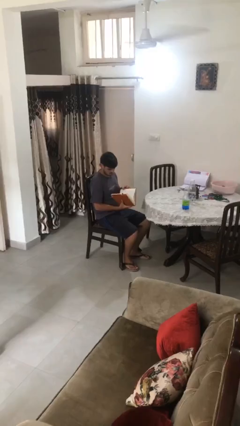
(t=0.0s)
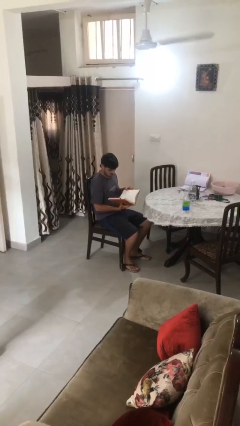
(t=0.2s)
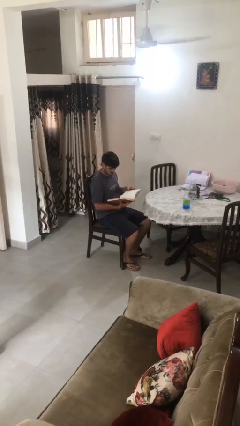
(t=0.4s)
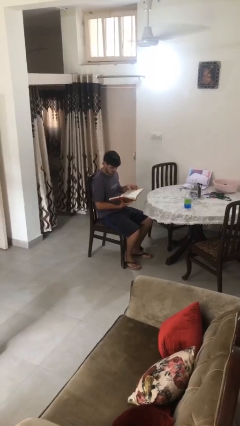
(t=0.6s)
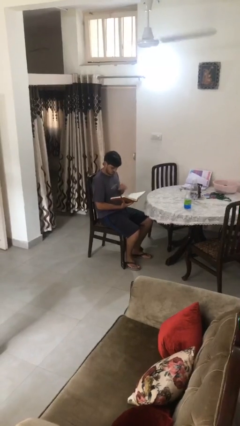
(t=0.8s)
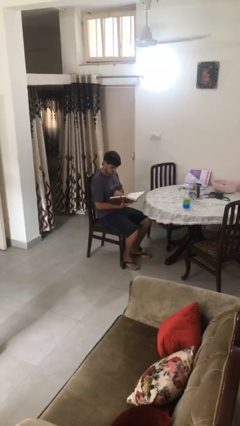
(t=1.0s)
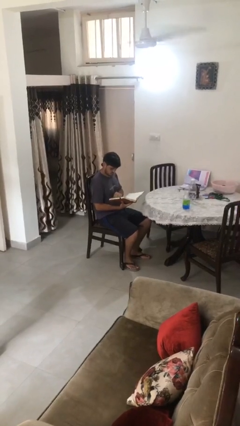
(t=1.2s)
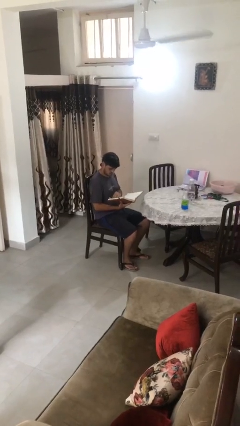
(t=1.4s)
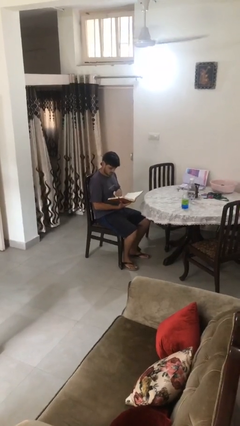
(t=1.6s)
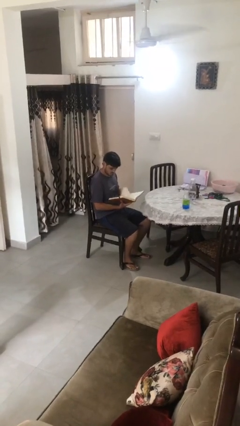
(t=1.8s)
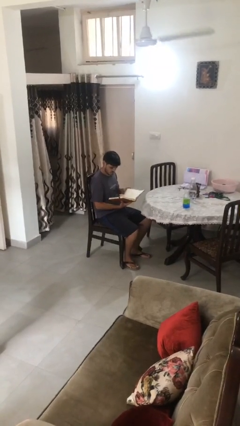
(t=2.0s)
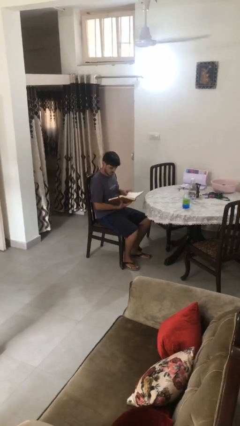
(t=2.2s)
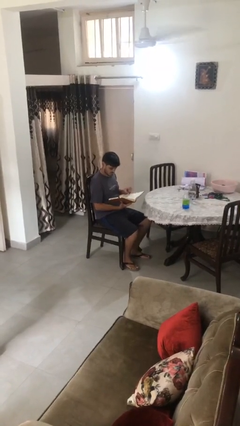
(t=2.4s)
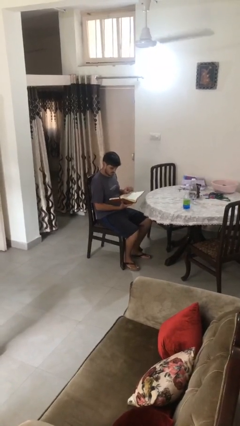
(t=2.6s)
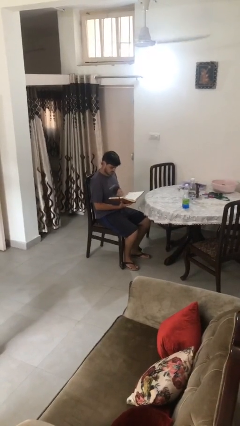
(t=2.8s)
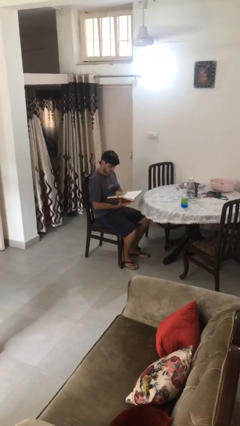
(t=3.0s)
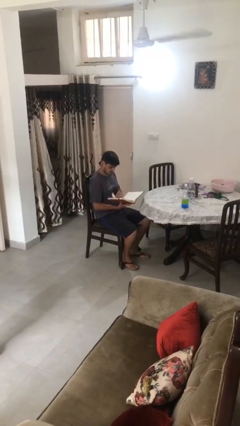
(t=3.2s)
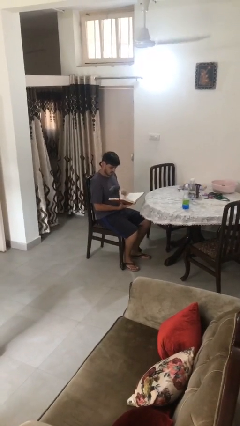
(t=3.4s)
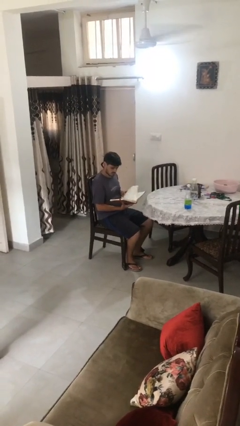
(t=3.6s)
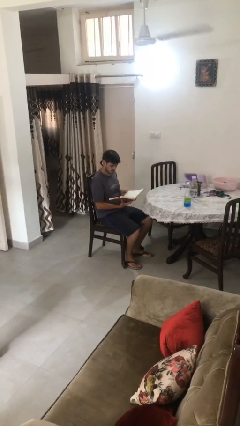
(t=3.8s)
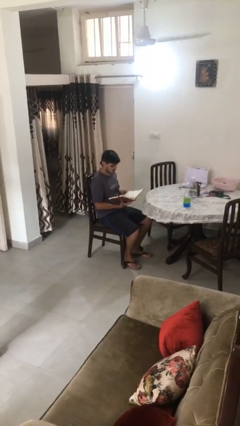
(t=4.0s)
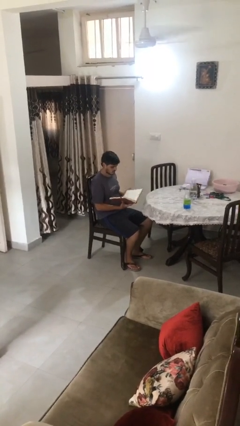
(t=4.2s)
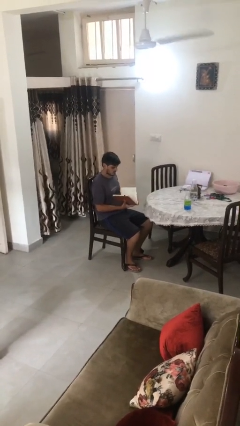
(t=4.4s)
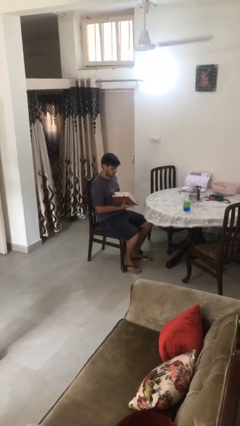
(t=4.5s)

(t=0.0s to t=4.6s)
person reads document

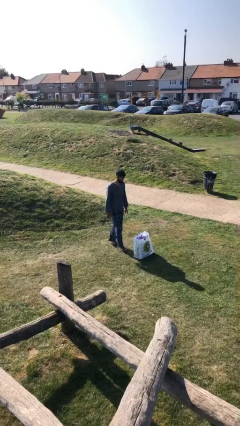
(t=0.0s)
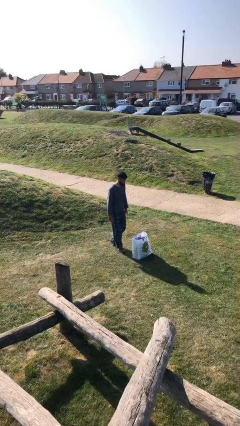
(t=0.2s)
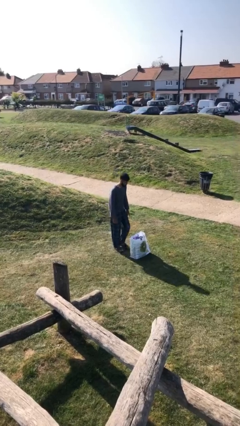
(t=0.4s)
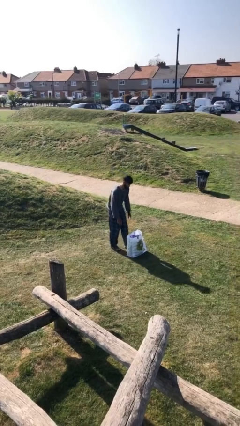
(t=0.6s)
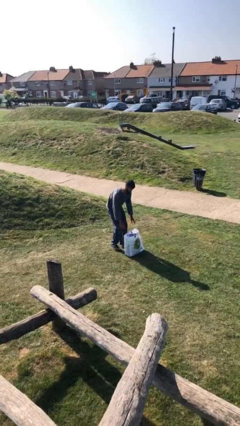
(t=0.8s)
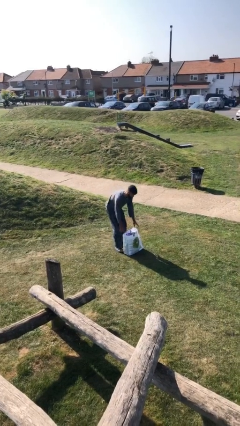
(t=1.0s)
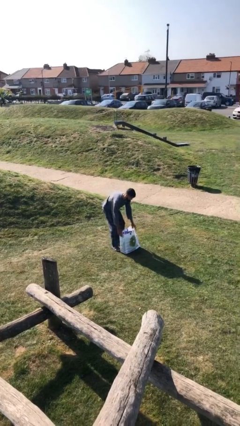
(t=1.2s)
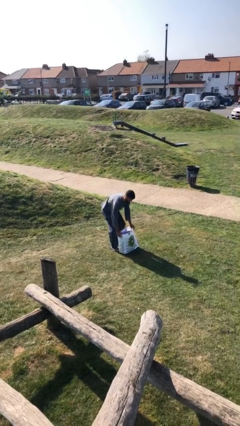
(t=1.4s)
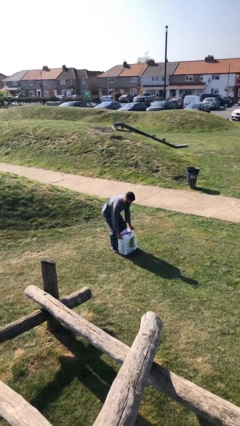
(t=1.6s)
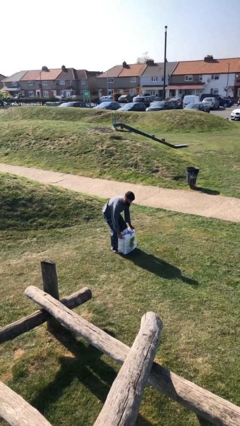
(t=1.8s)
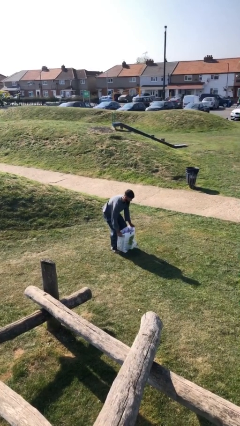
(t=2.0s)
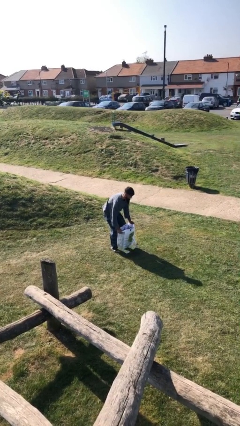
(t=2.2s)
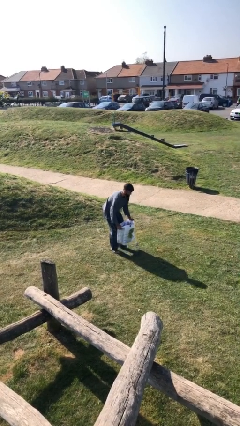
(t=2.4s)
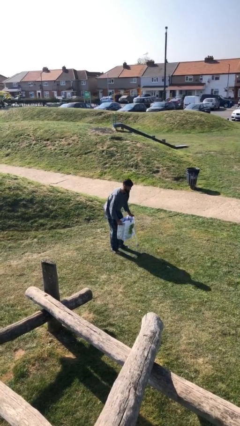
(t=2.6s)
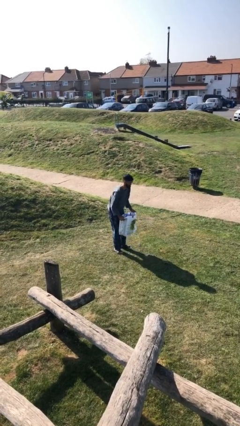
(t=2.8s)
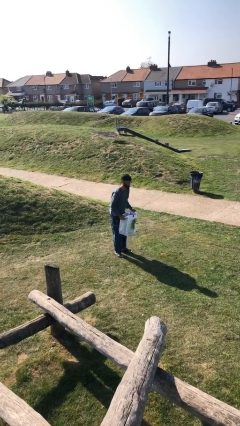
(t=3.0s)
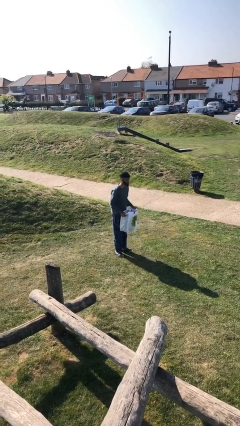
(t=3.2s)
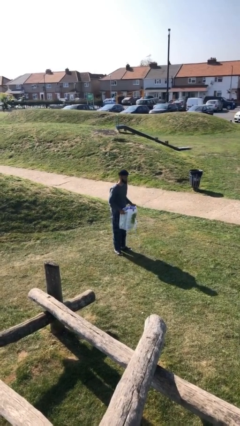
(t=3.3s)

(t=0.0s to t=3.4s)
person picks up object from floor

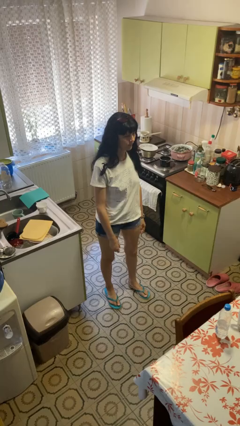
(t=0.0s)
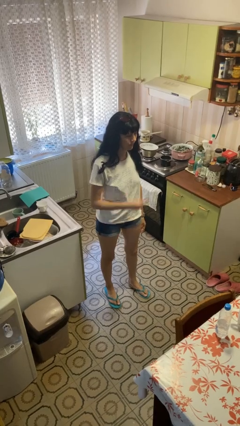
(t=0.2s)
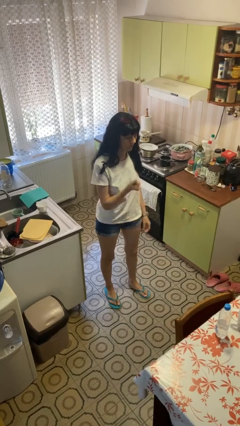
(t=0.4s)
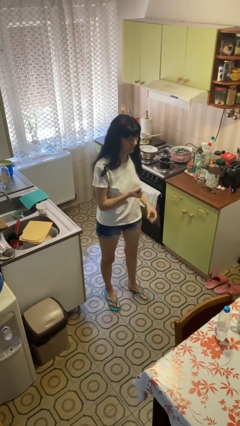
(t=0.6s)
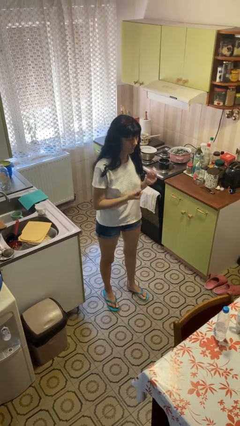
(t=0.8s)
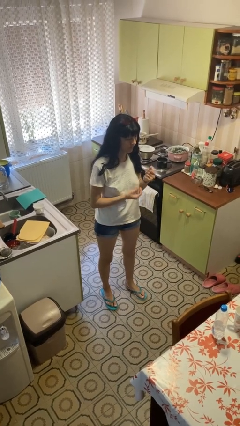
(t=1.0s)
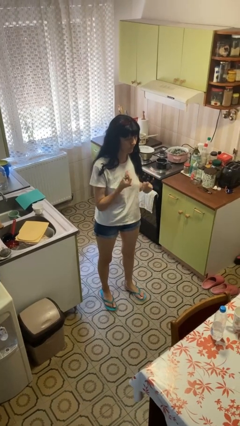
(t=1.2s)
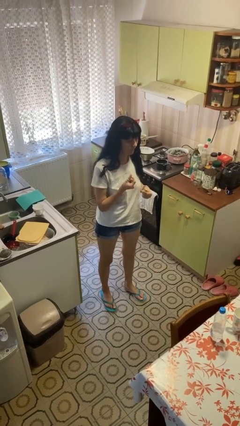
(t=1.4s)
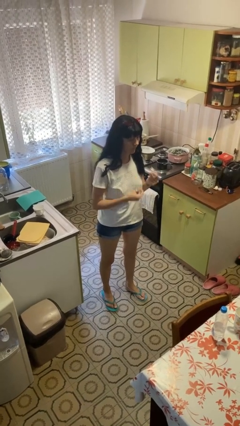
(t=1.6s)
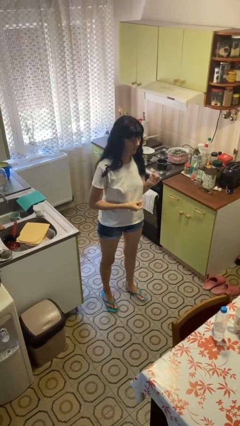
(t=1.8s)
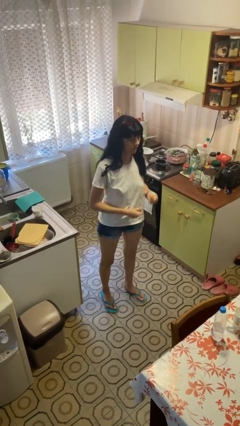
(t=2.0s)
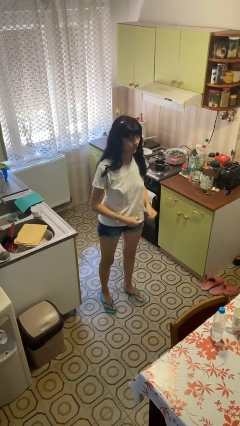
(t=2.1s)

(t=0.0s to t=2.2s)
person snaps fingers

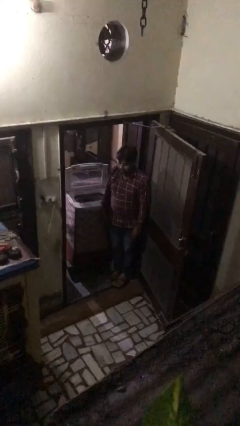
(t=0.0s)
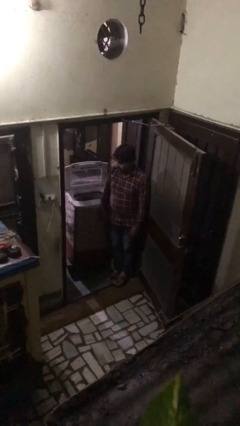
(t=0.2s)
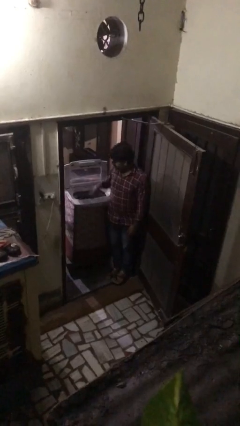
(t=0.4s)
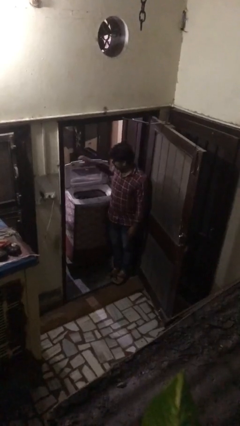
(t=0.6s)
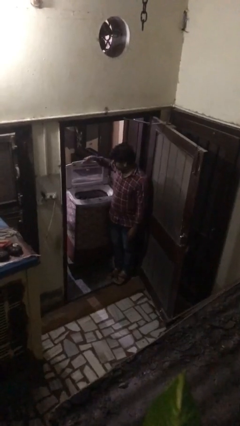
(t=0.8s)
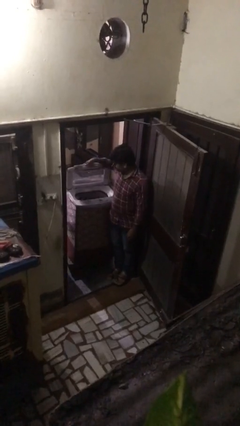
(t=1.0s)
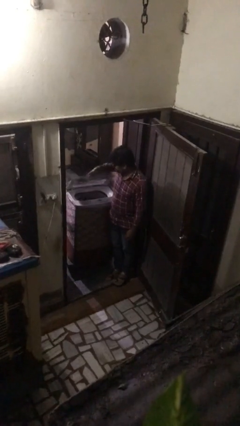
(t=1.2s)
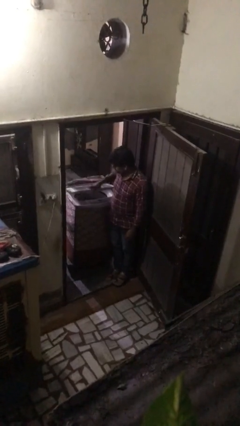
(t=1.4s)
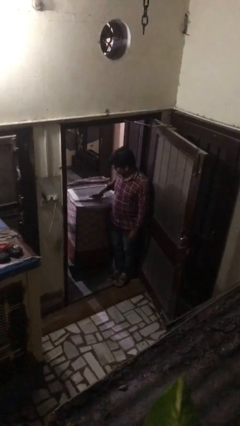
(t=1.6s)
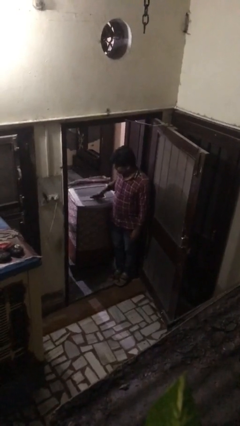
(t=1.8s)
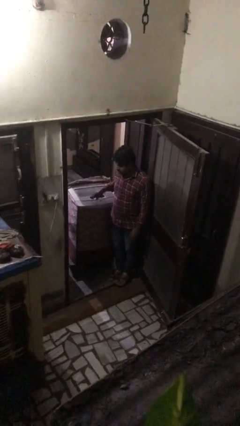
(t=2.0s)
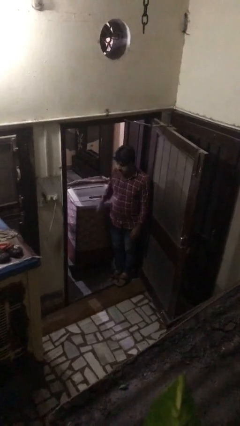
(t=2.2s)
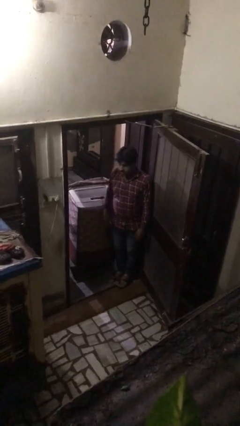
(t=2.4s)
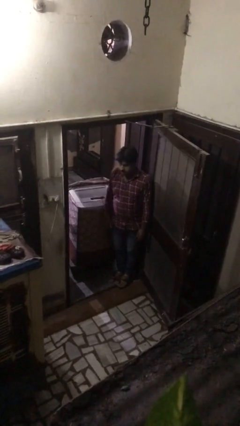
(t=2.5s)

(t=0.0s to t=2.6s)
person closes clothes washer

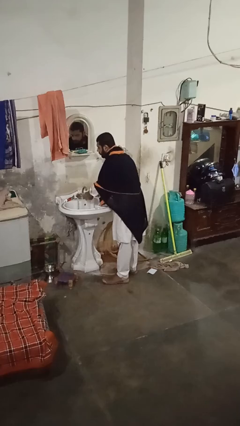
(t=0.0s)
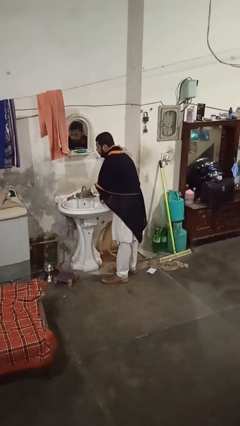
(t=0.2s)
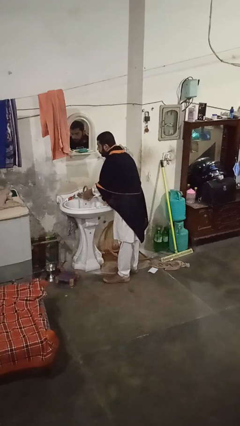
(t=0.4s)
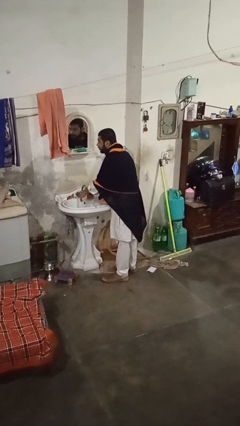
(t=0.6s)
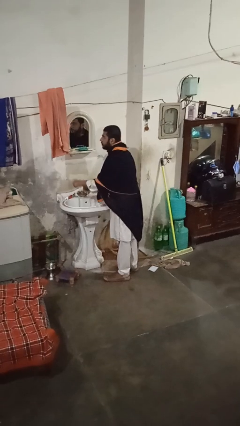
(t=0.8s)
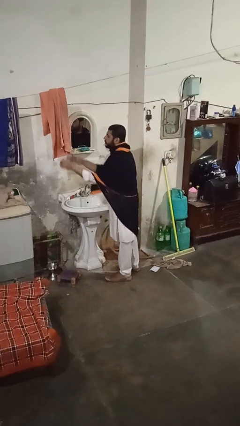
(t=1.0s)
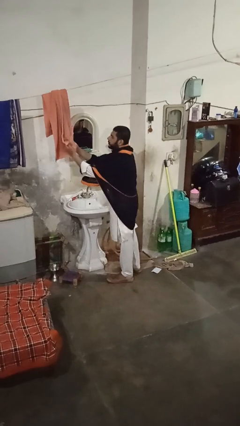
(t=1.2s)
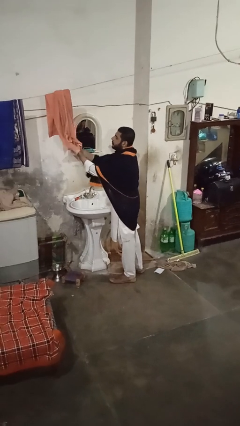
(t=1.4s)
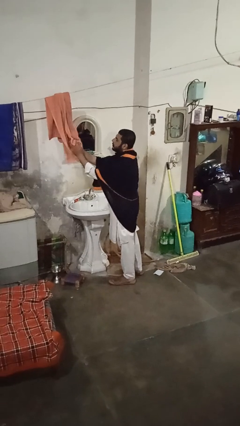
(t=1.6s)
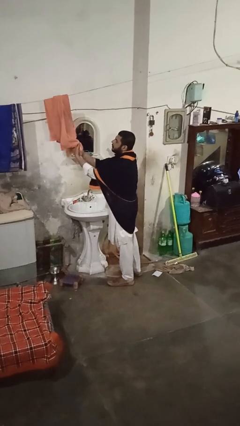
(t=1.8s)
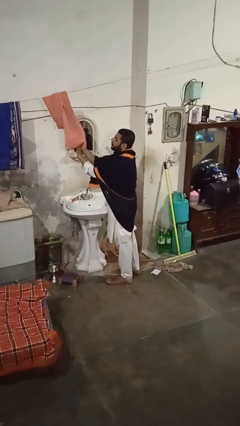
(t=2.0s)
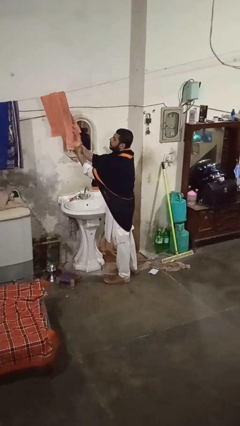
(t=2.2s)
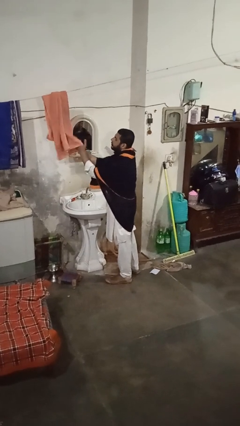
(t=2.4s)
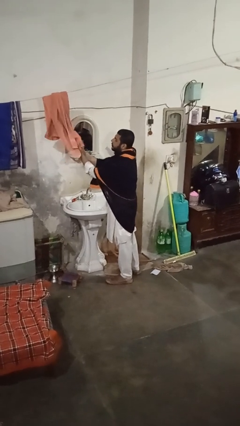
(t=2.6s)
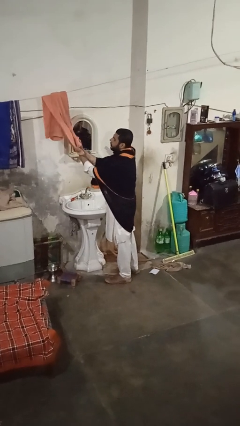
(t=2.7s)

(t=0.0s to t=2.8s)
person dries hands with towel

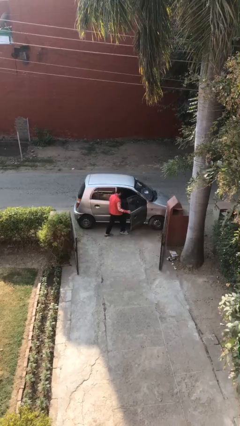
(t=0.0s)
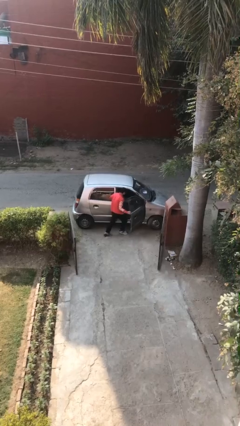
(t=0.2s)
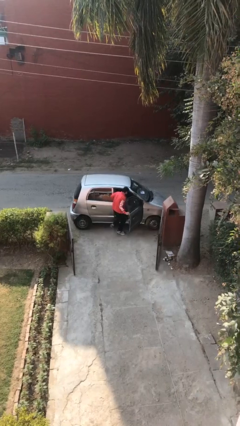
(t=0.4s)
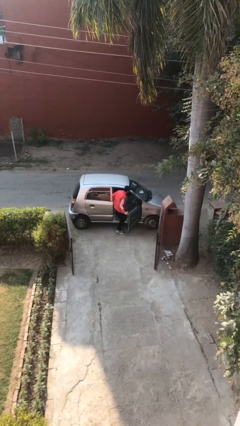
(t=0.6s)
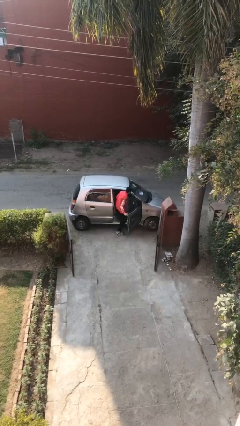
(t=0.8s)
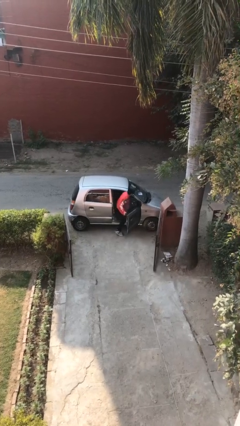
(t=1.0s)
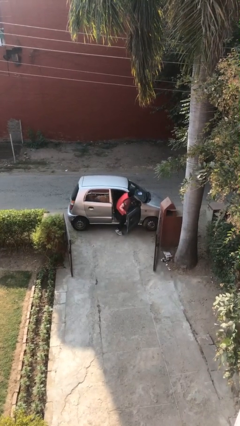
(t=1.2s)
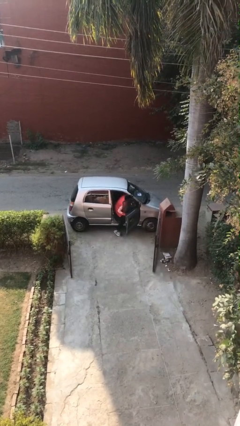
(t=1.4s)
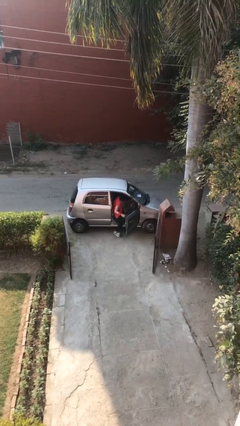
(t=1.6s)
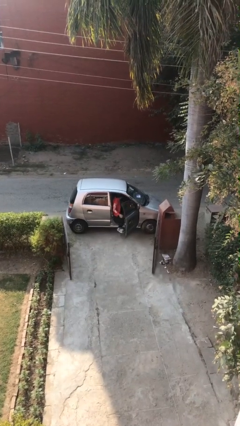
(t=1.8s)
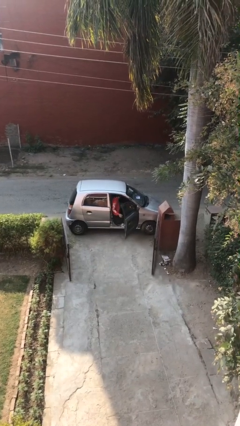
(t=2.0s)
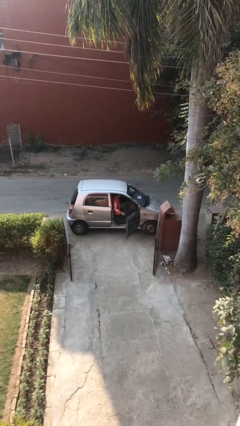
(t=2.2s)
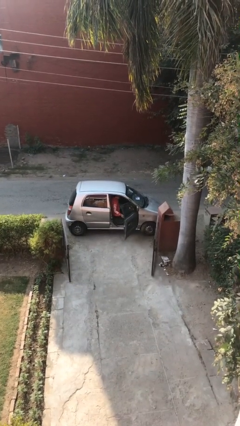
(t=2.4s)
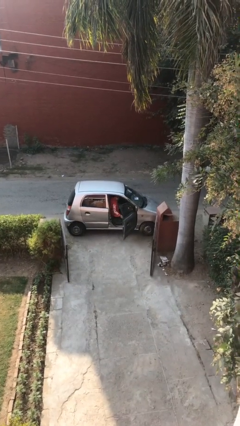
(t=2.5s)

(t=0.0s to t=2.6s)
person enters car
